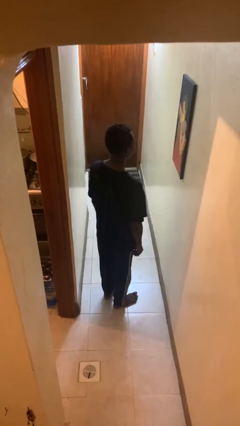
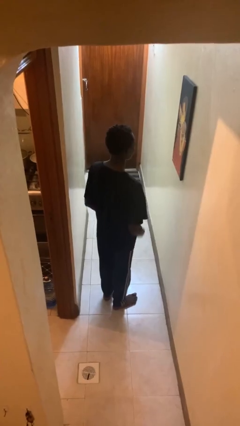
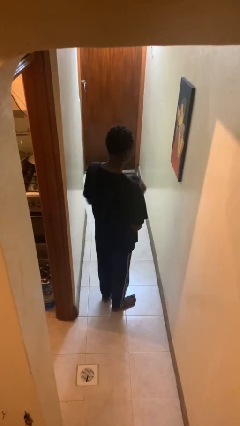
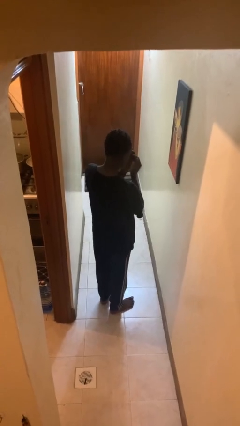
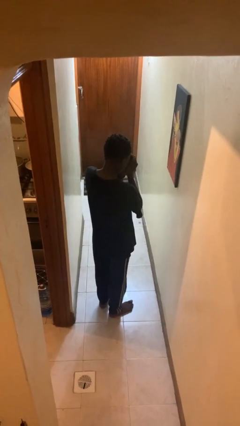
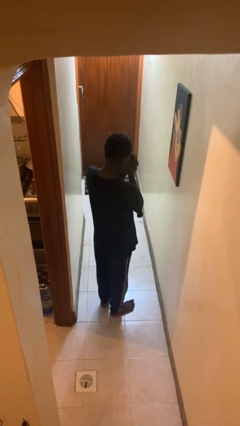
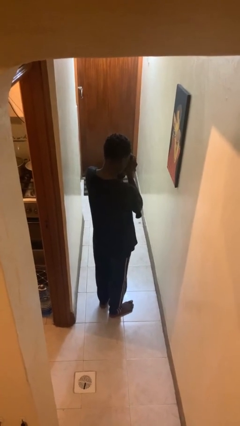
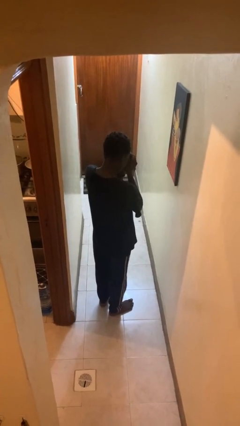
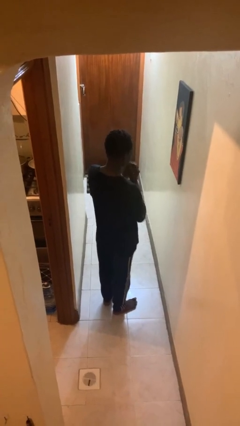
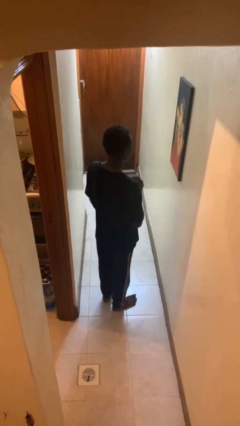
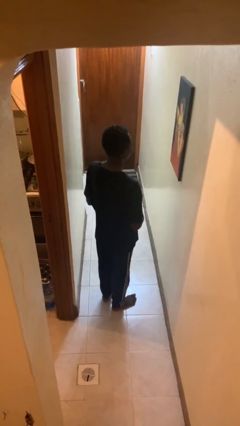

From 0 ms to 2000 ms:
person shades eyes

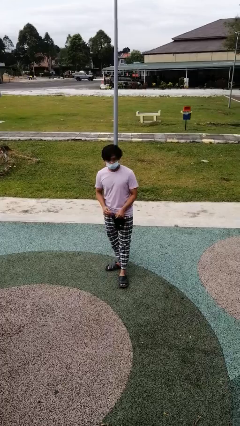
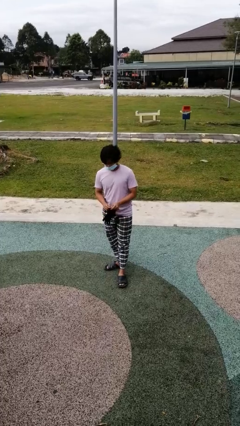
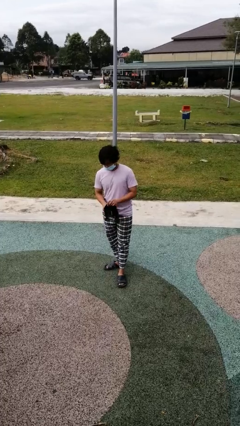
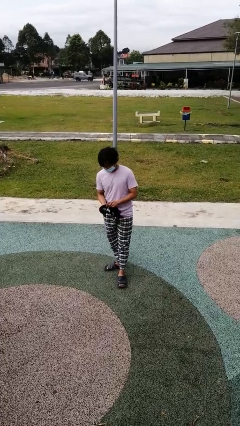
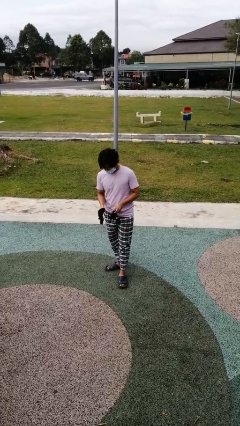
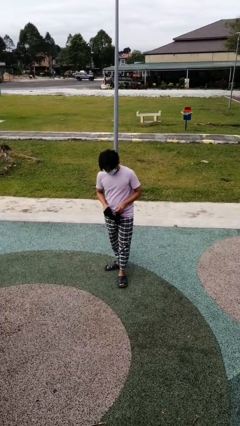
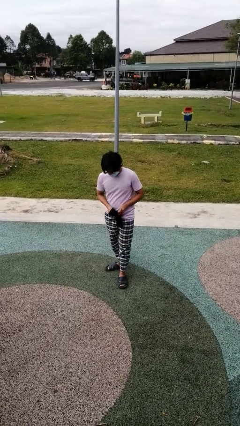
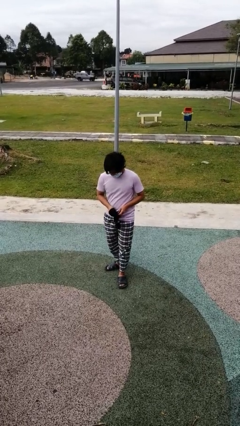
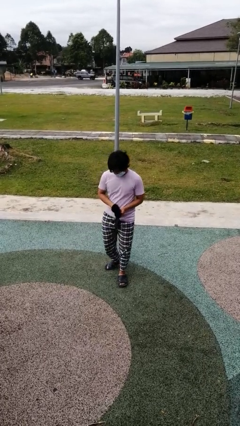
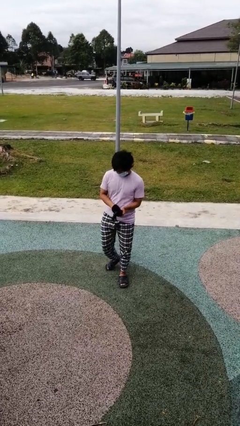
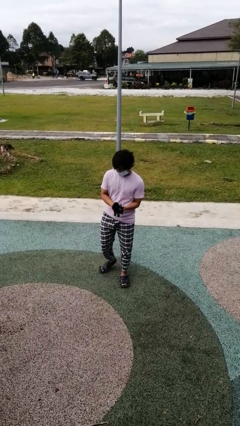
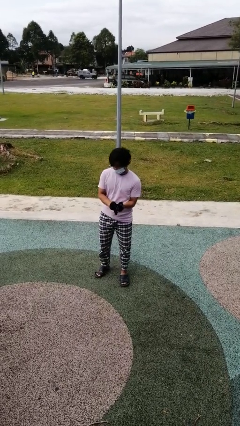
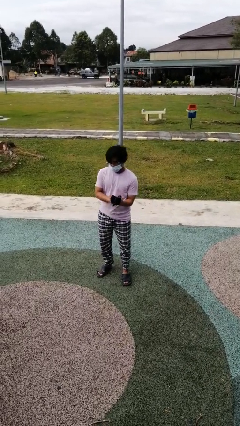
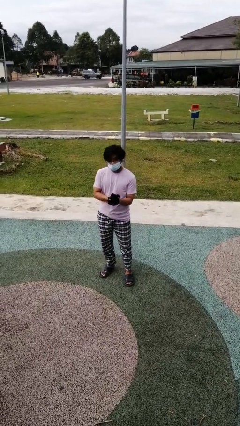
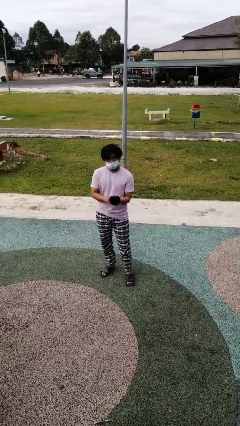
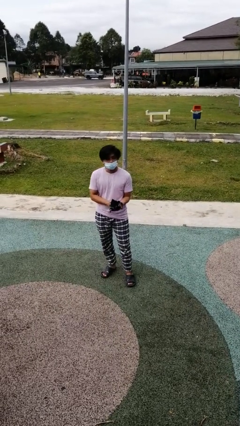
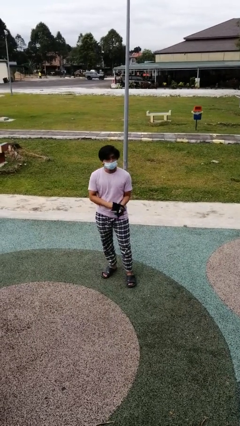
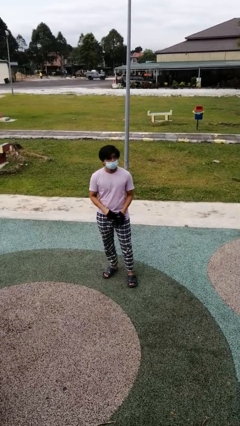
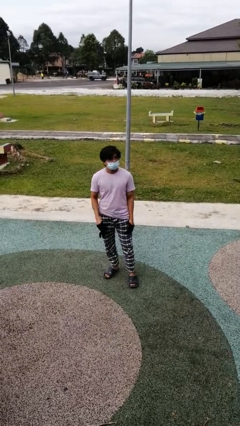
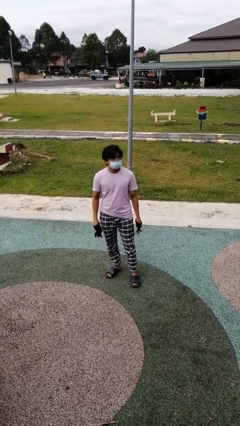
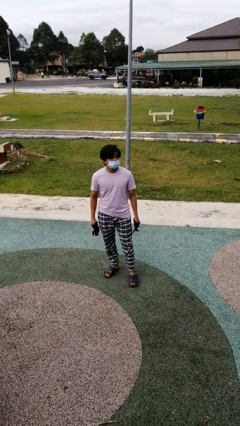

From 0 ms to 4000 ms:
person puts on gloves

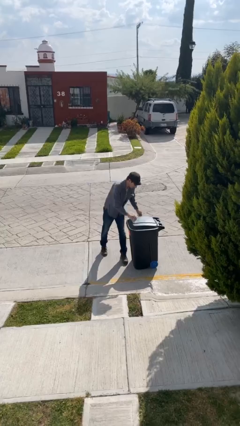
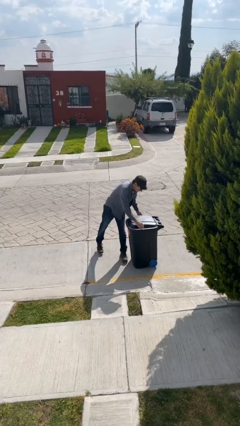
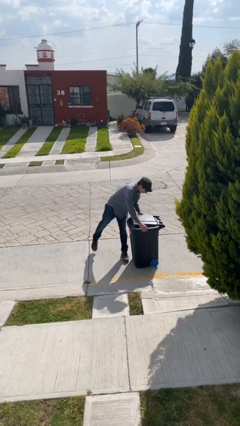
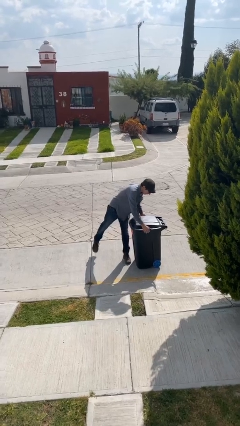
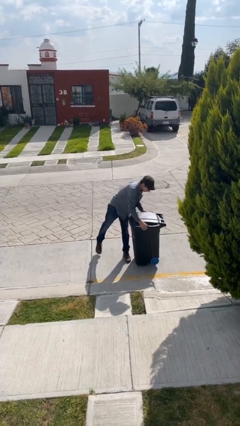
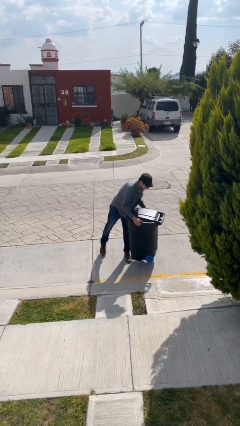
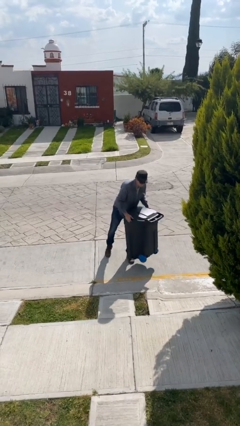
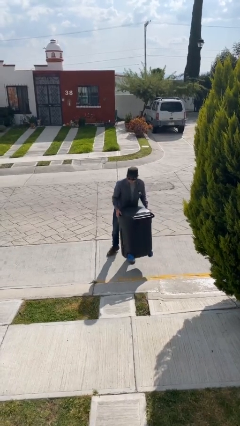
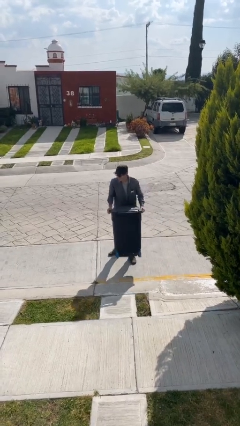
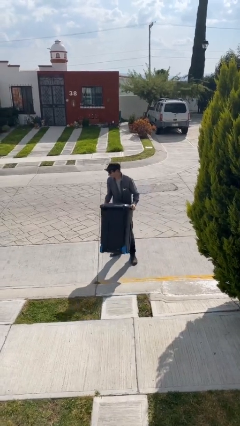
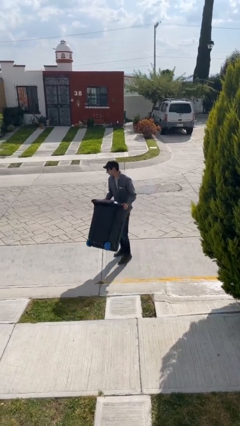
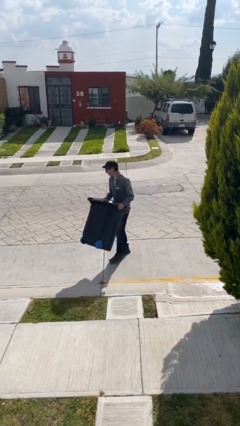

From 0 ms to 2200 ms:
person picks up object from floor

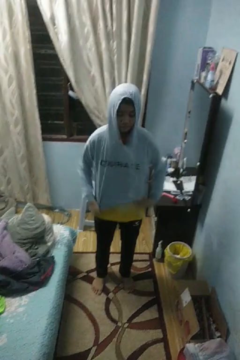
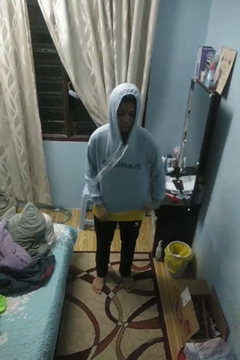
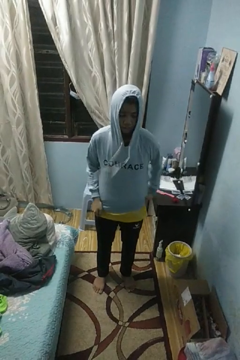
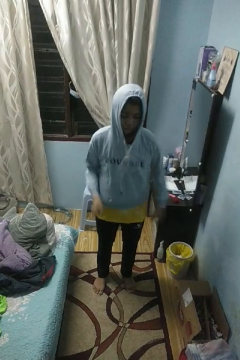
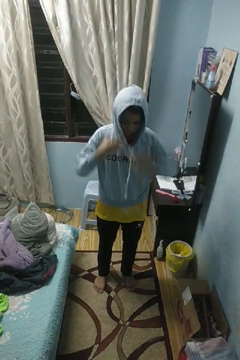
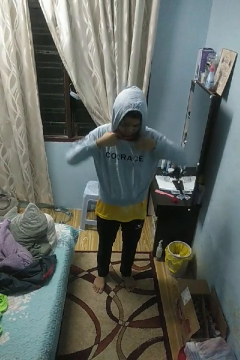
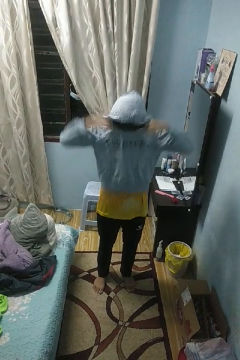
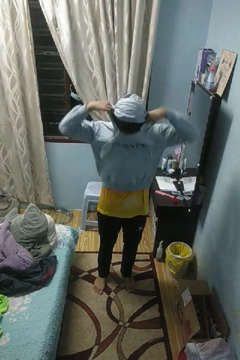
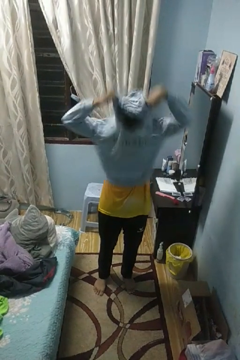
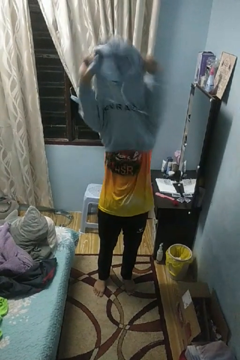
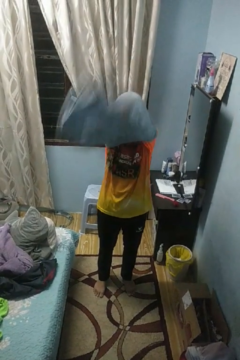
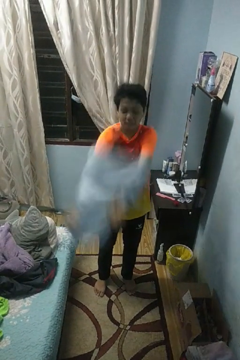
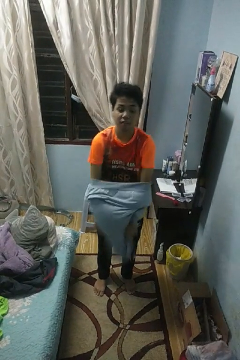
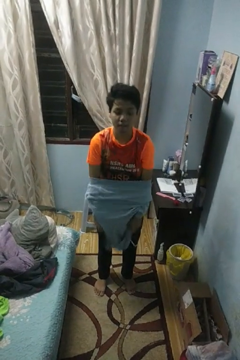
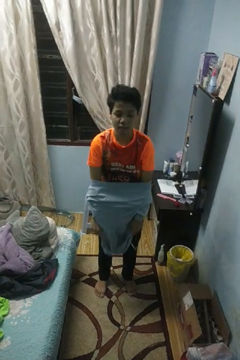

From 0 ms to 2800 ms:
person takes off hoodie

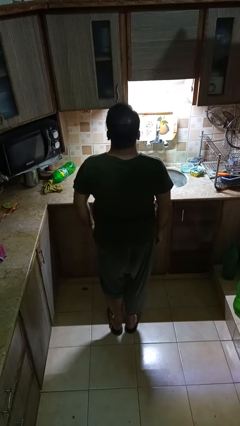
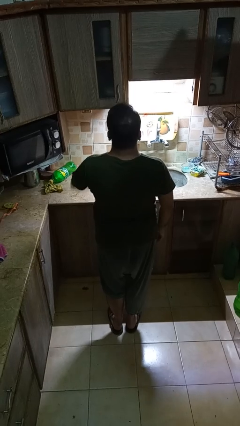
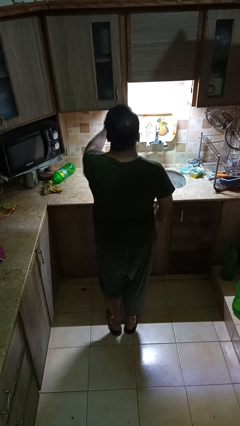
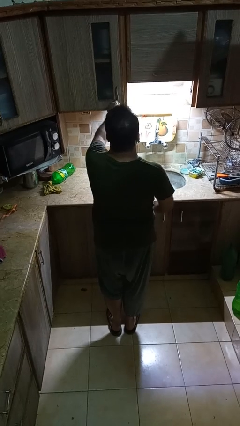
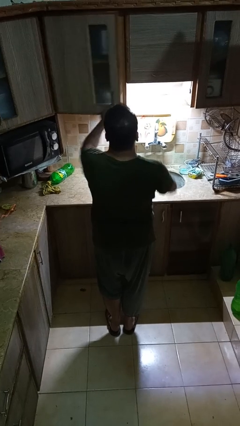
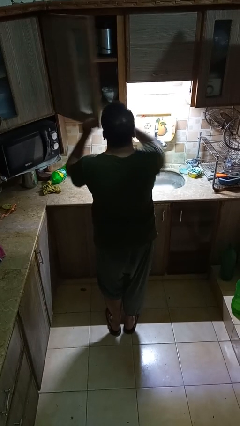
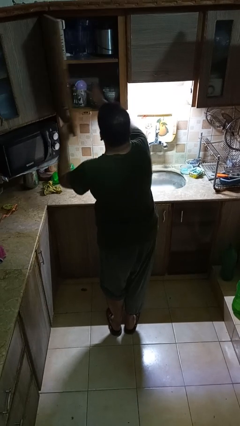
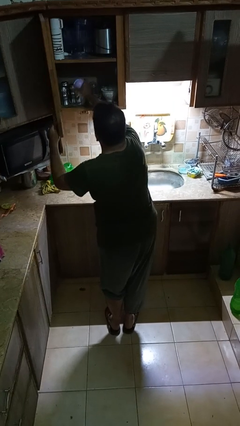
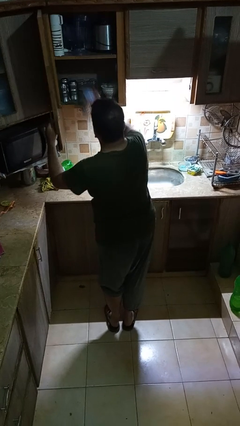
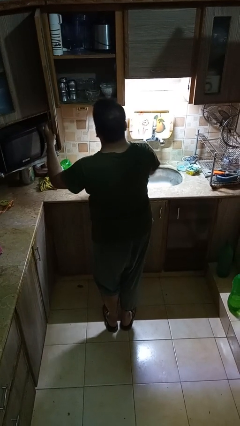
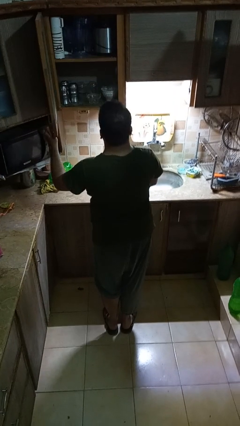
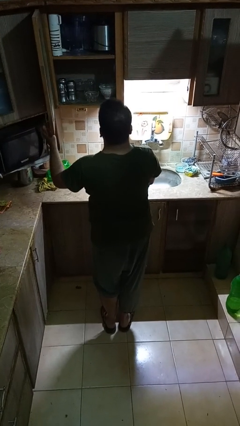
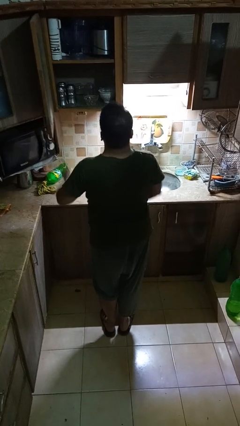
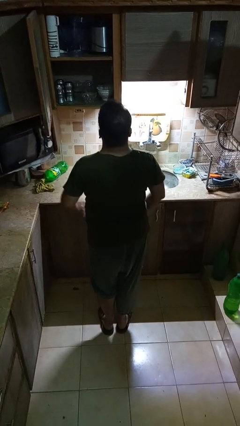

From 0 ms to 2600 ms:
person takes object from cabinet

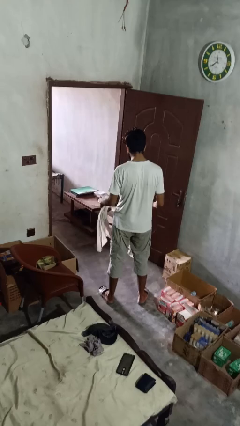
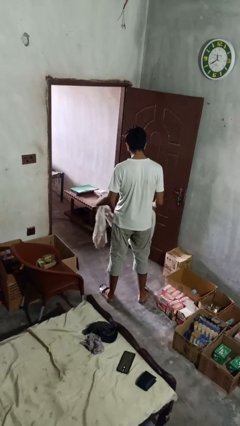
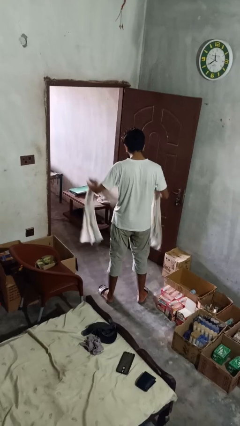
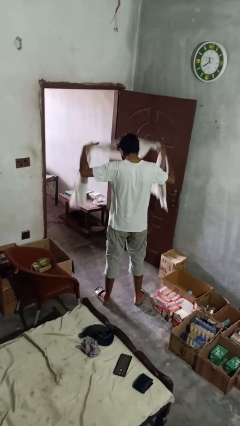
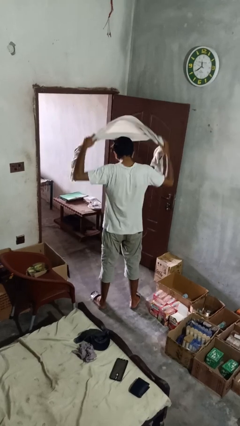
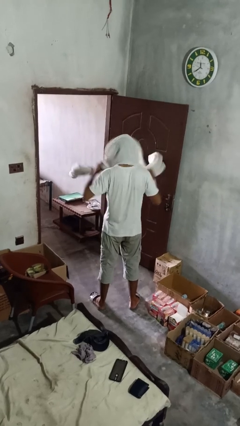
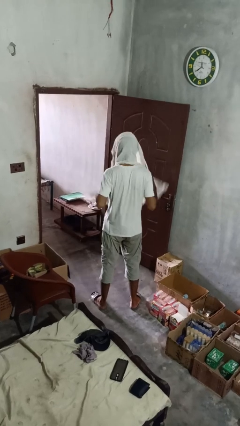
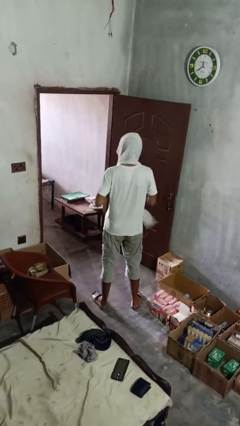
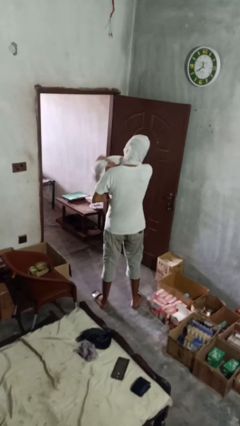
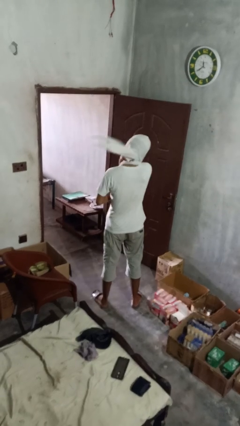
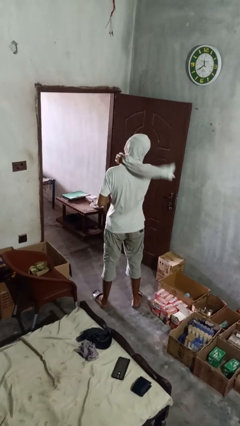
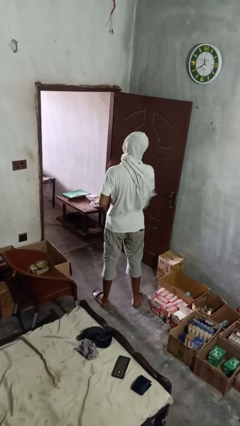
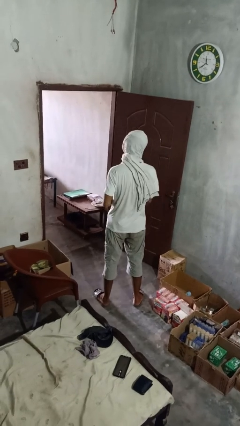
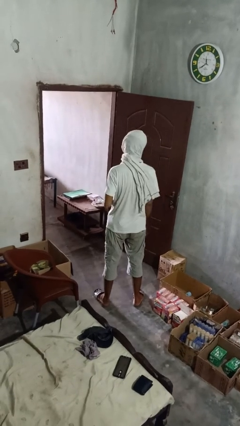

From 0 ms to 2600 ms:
person puts on scarf

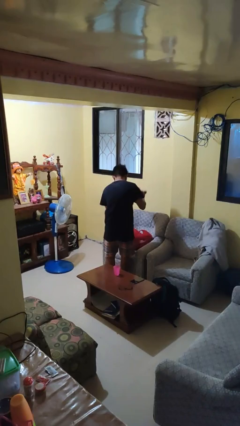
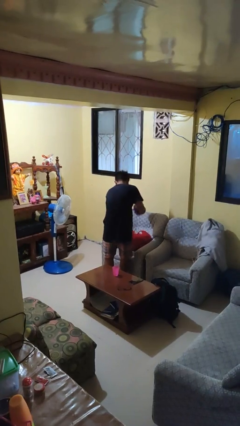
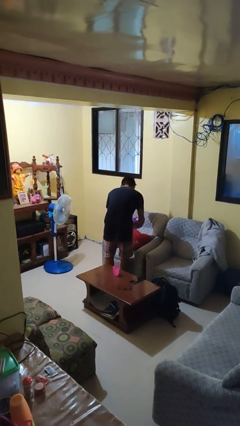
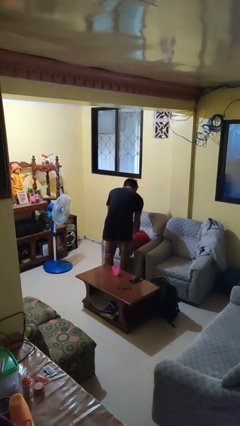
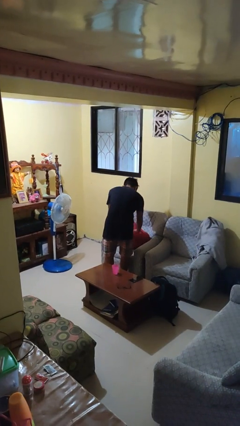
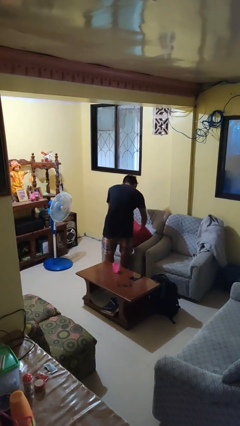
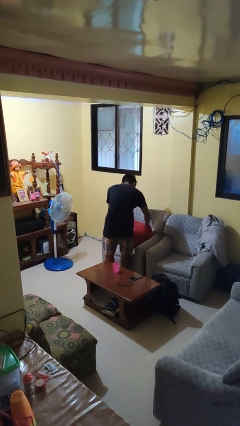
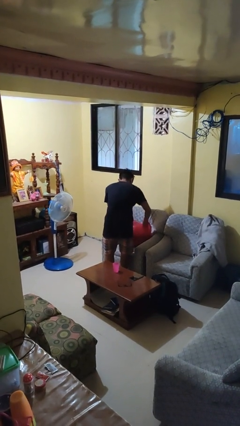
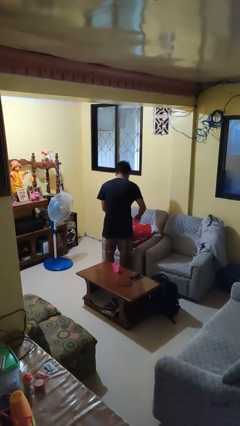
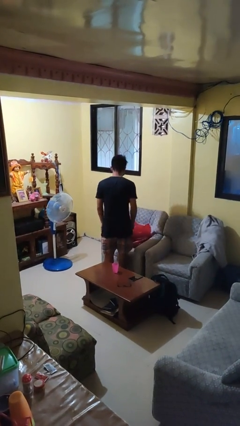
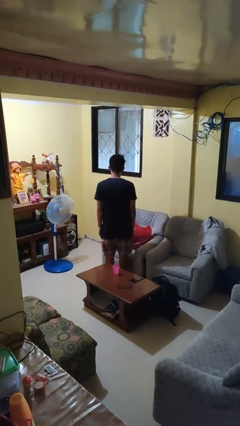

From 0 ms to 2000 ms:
person puts object into bag
